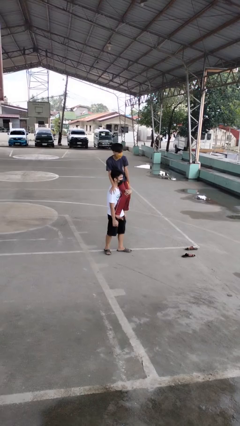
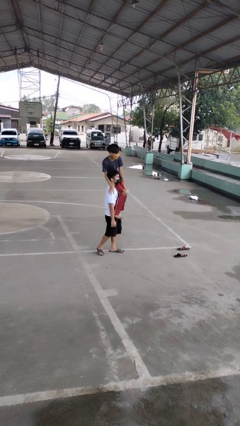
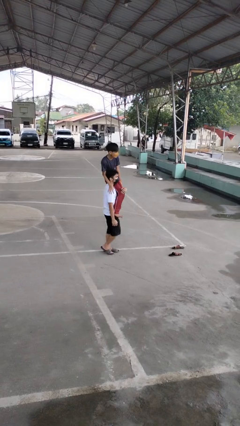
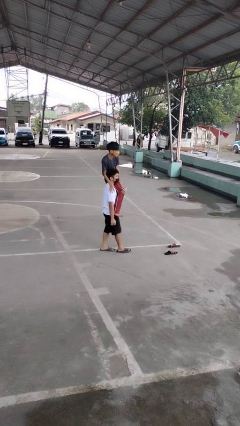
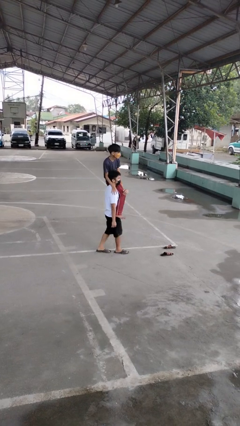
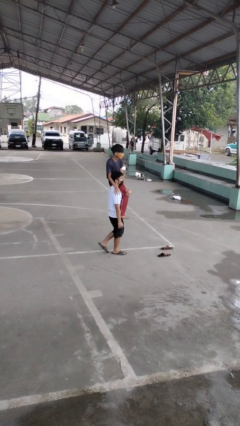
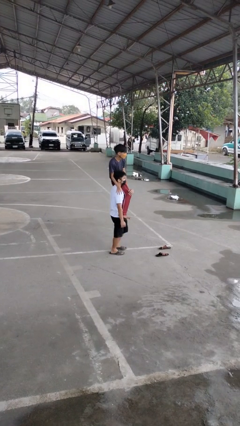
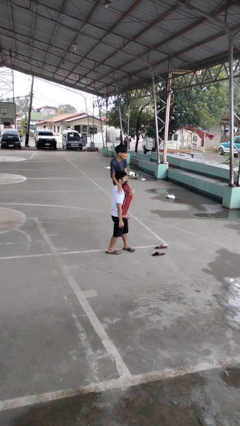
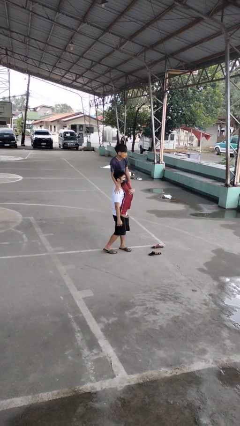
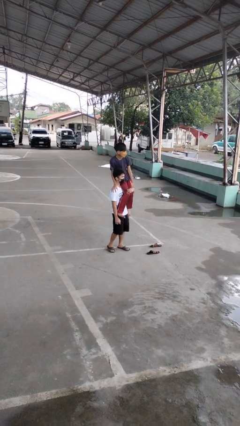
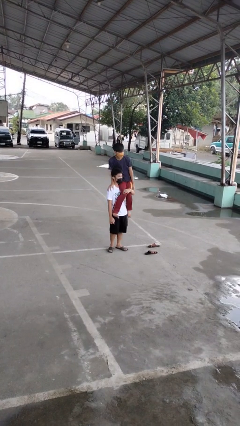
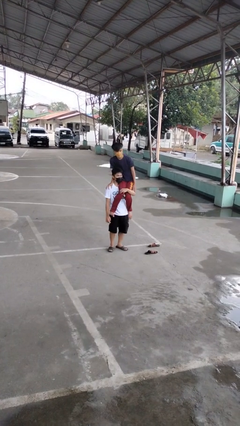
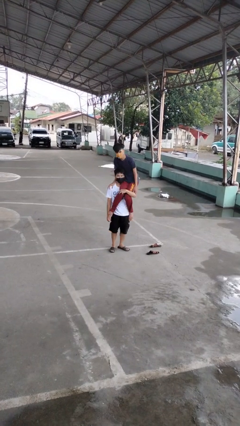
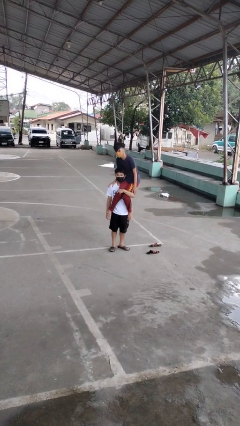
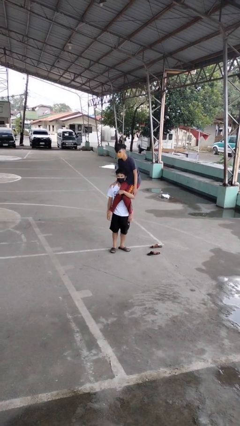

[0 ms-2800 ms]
person carries person on shoulders

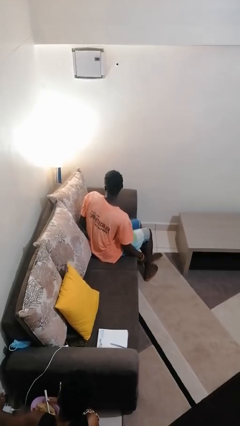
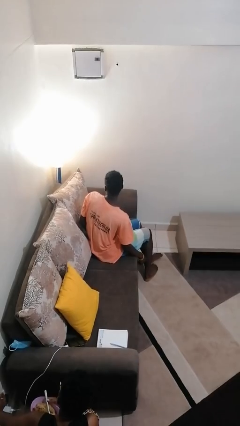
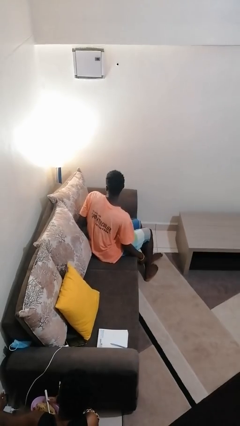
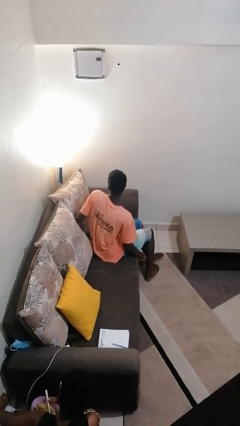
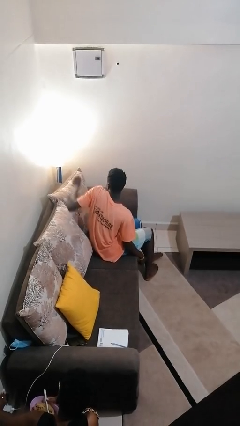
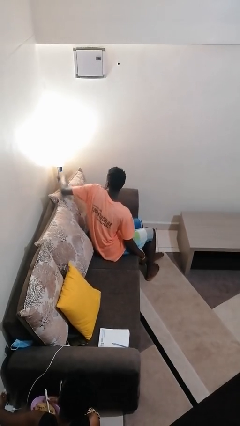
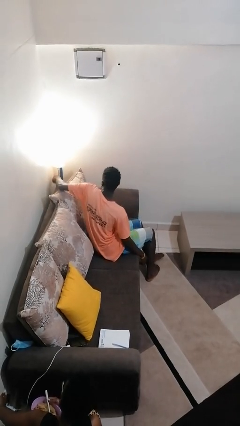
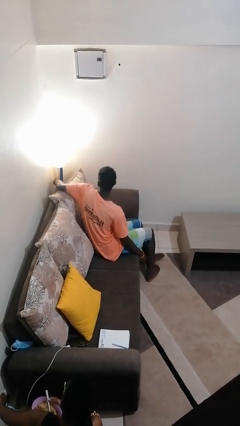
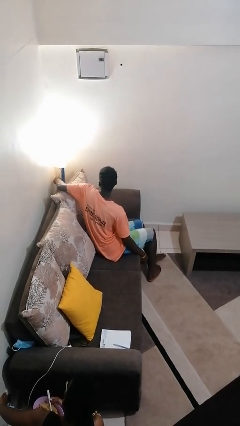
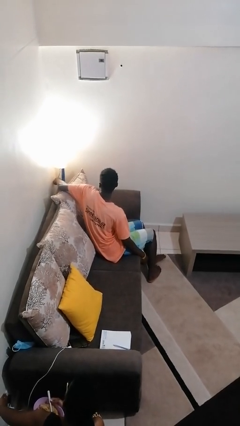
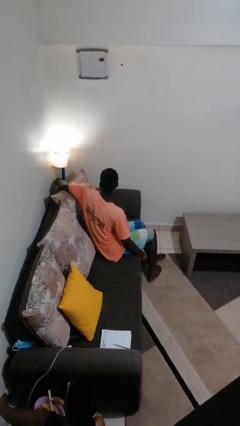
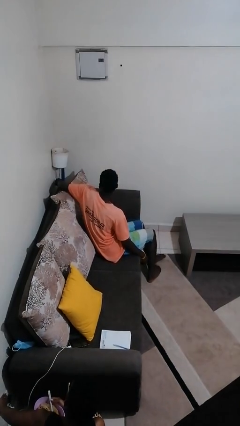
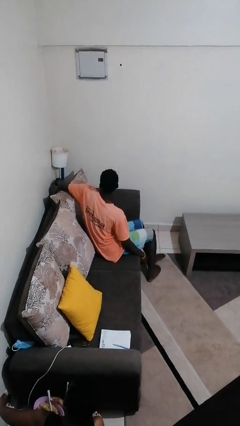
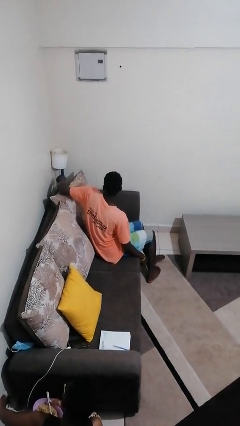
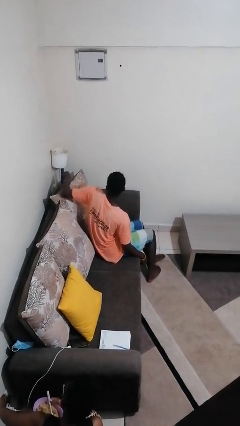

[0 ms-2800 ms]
person turns off lamp

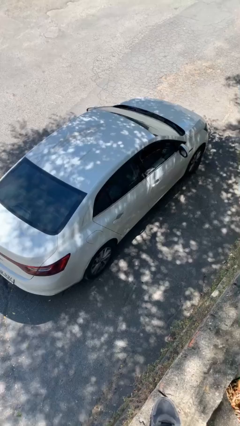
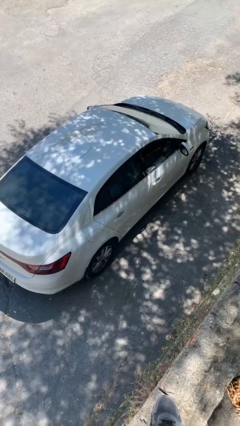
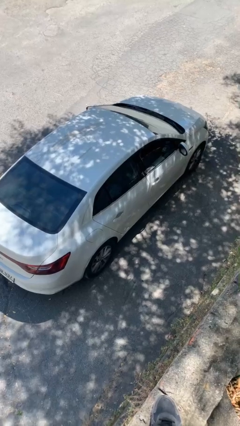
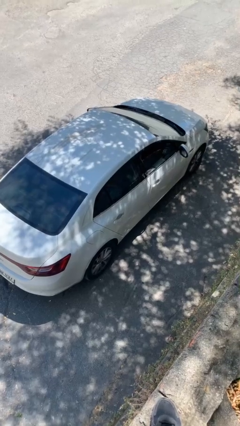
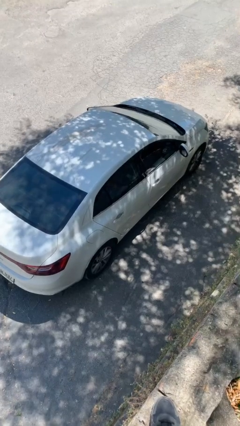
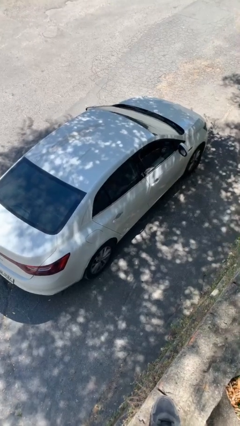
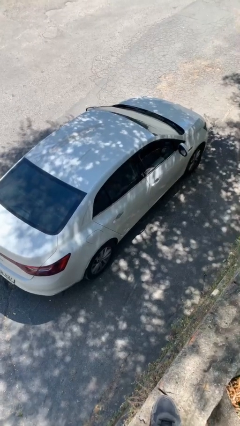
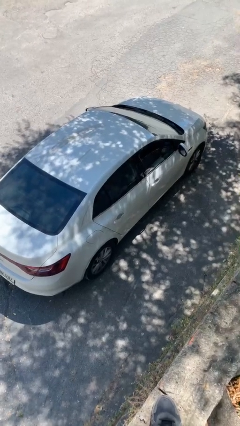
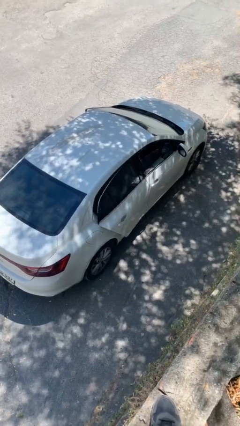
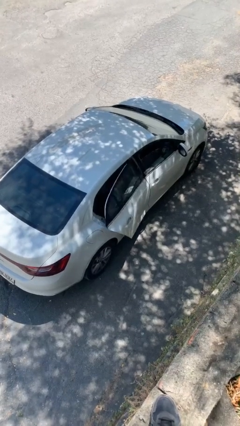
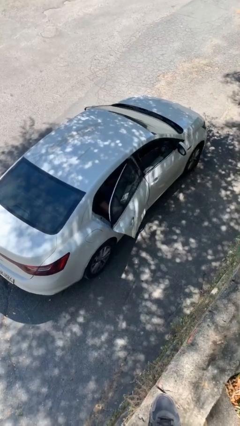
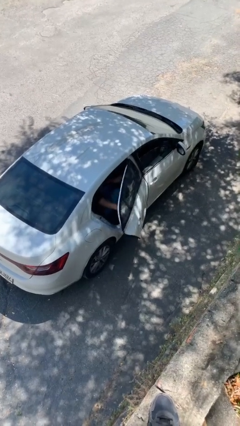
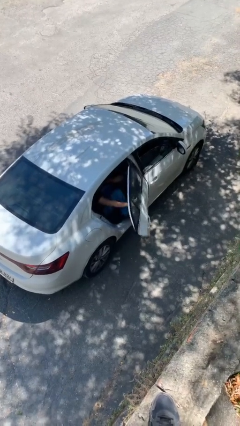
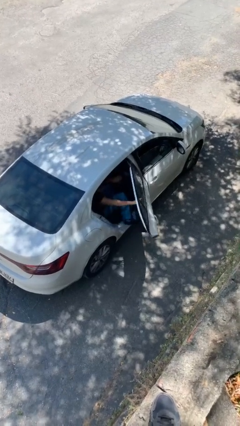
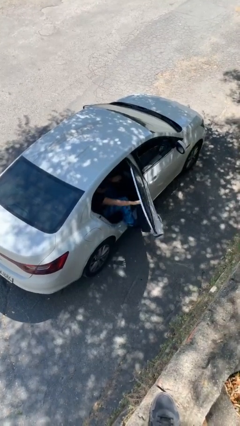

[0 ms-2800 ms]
person opens car door

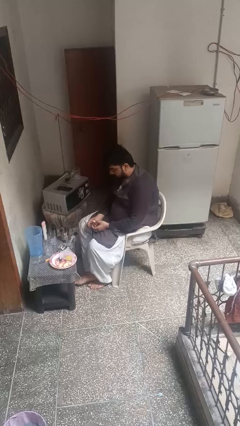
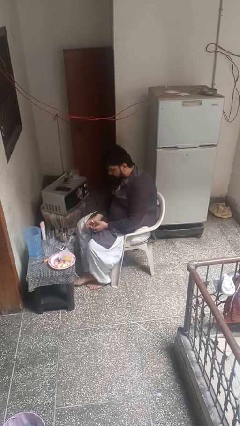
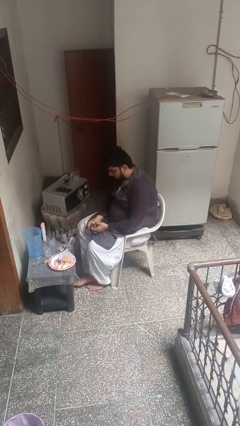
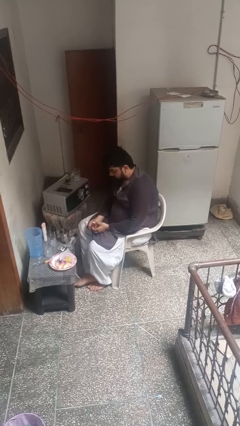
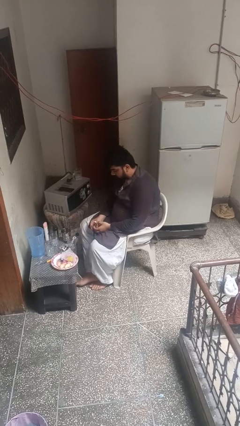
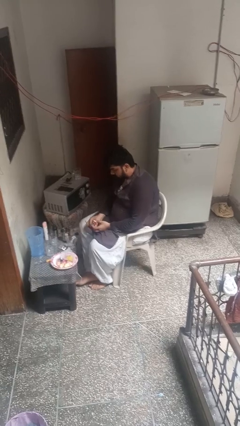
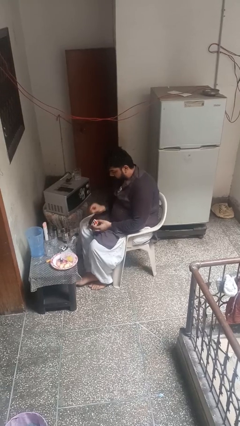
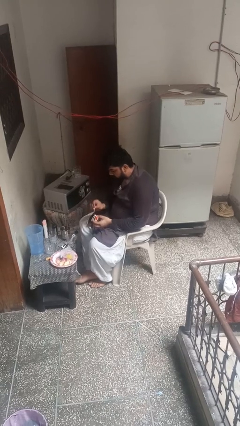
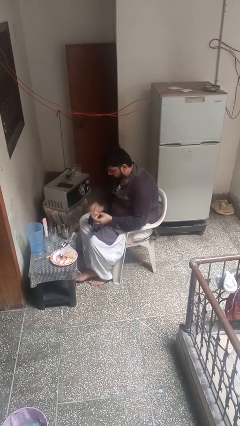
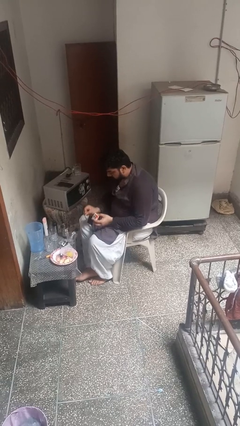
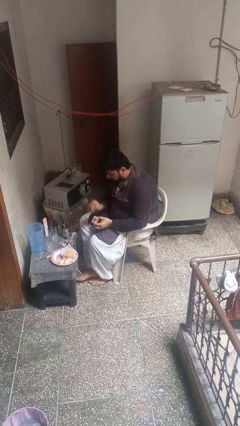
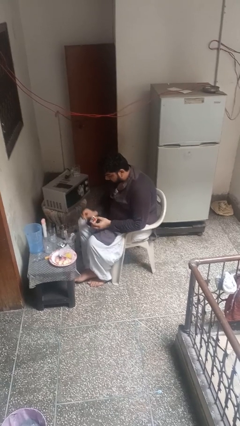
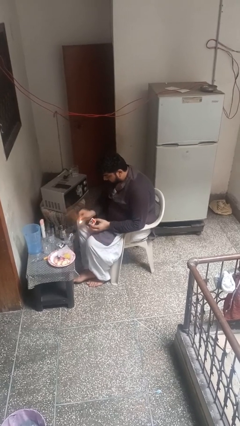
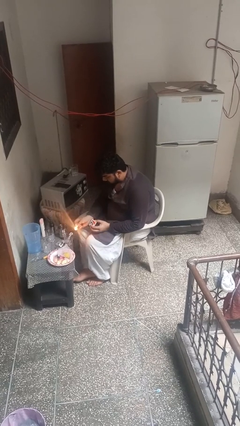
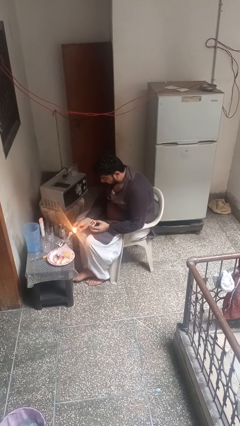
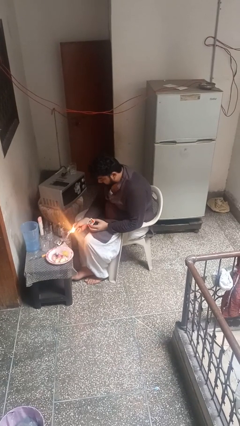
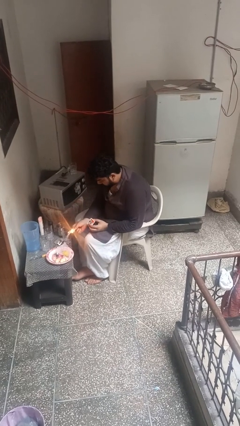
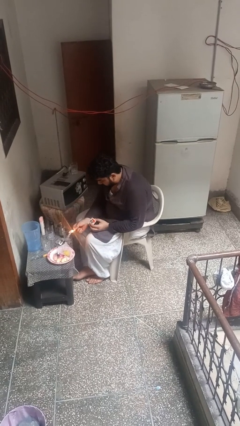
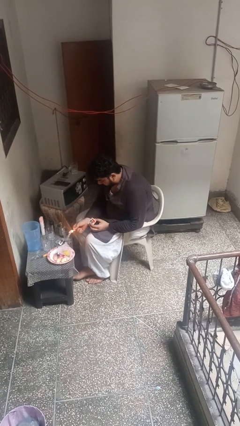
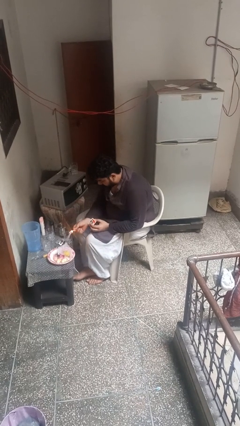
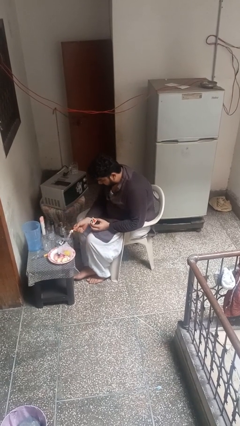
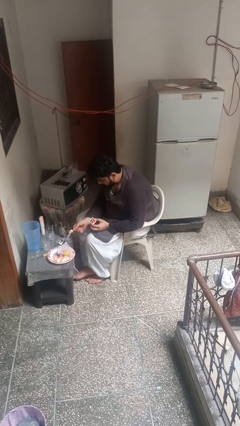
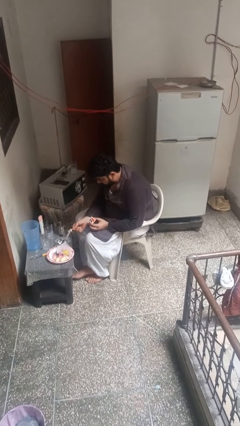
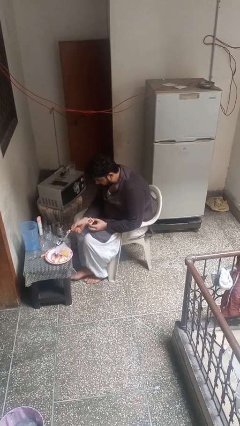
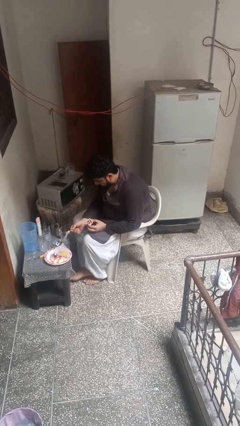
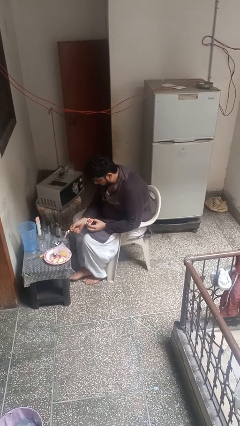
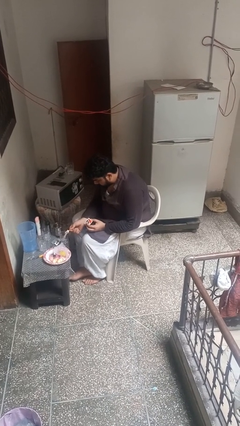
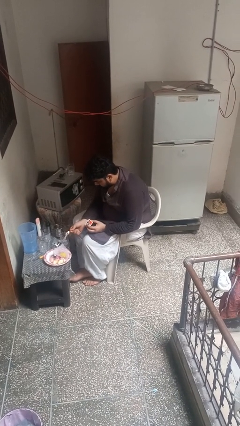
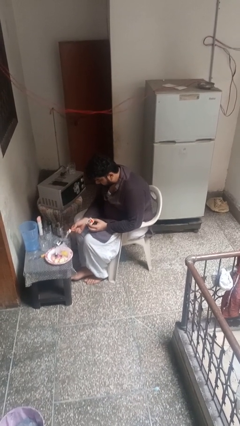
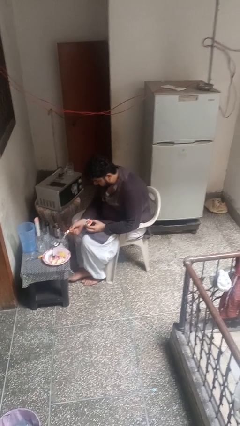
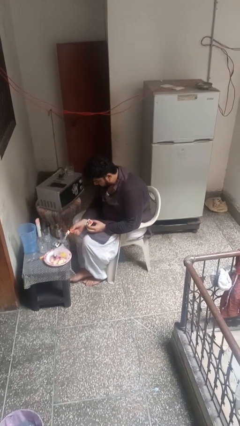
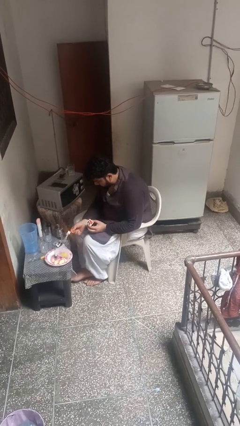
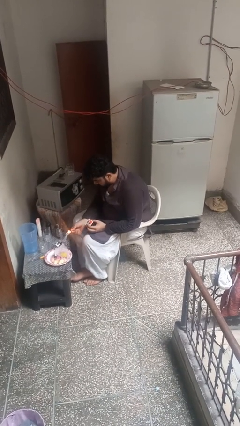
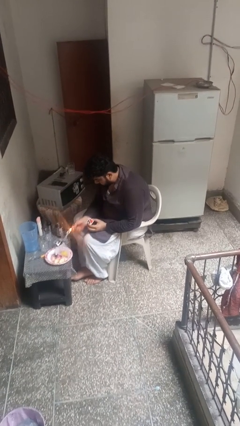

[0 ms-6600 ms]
person lights candle

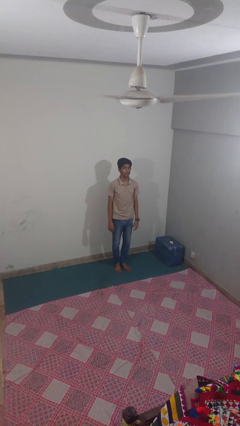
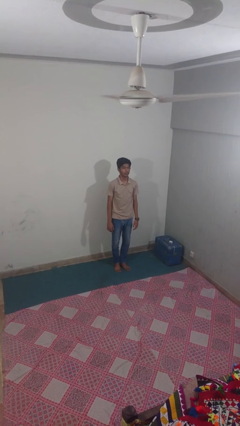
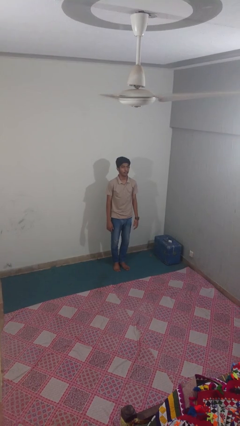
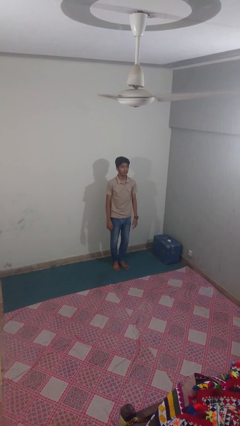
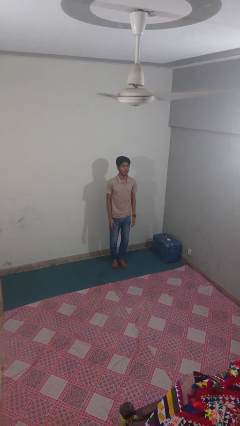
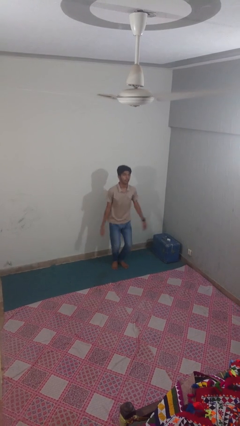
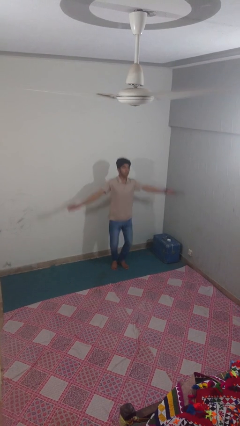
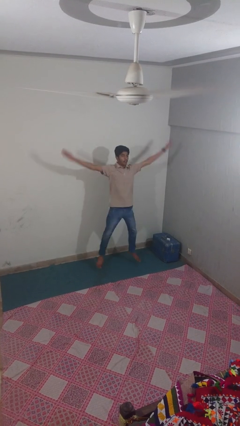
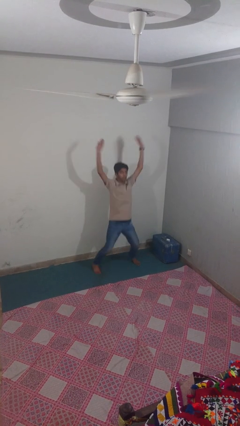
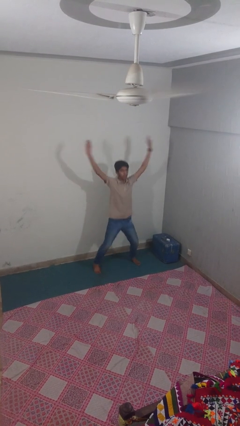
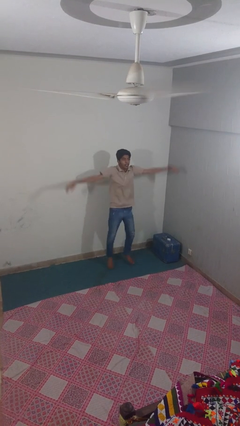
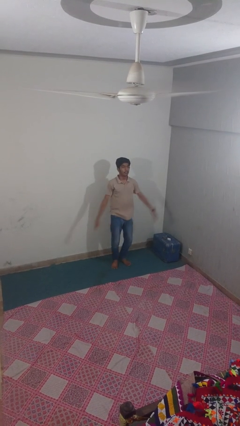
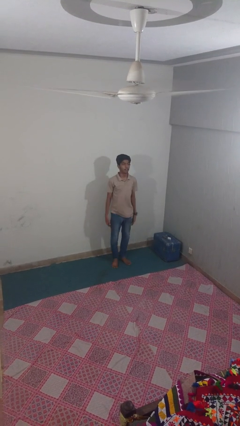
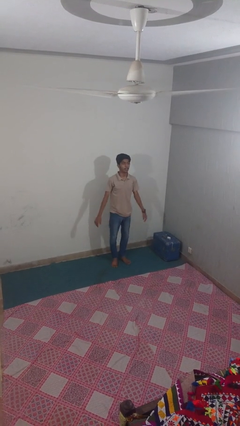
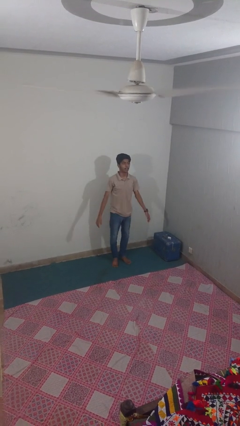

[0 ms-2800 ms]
person exercises with jumping jacks
